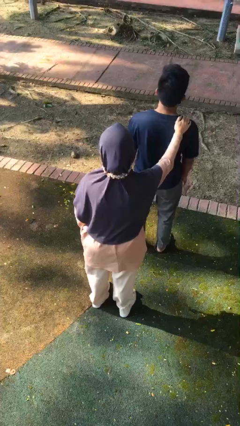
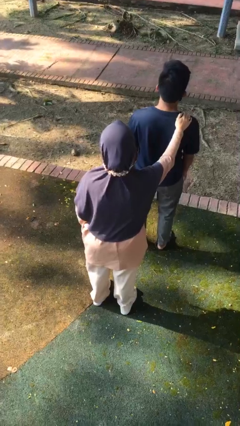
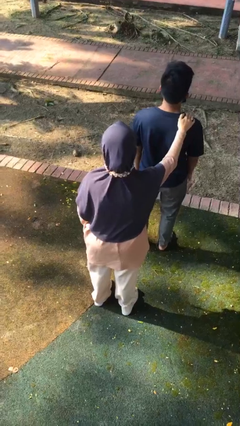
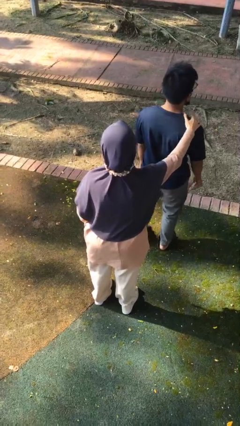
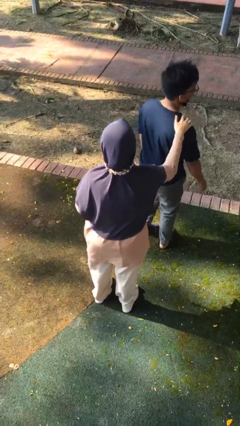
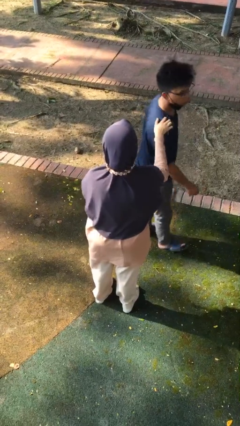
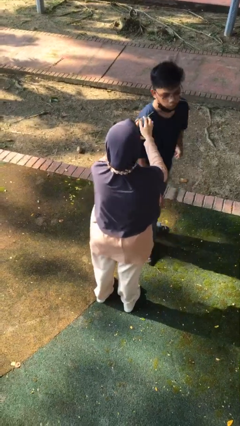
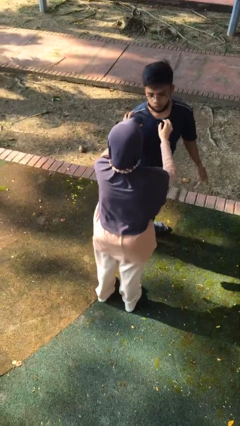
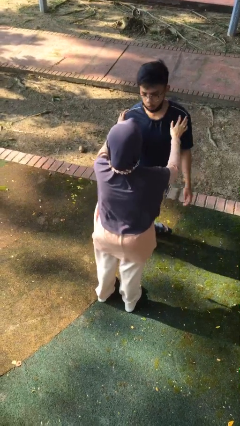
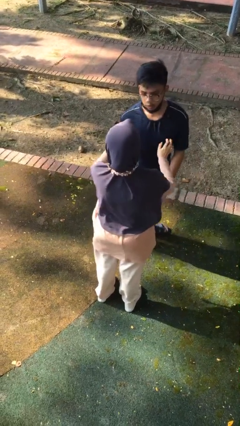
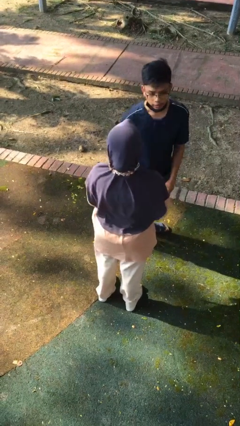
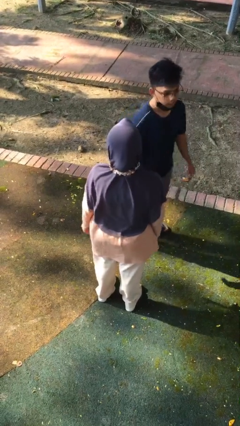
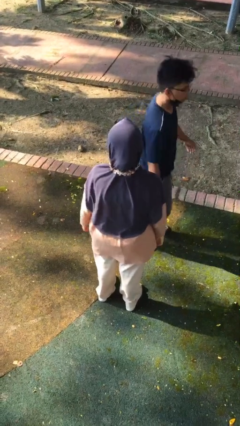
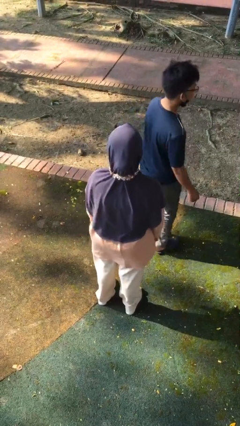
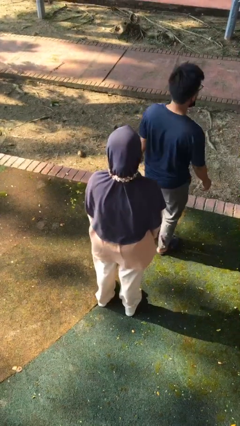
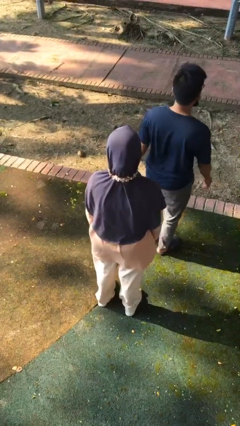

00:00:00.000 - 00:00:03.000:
person spins person around

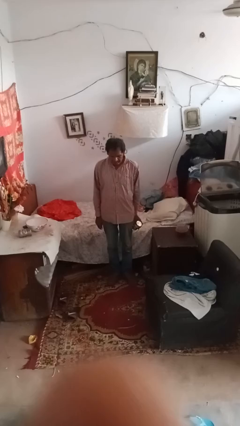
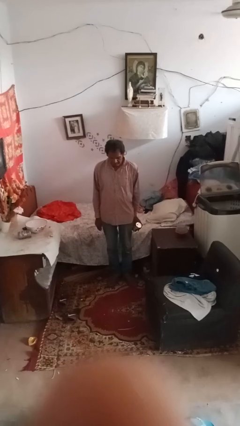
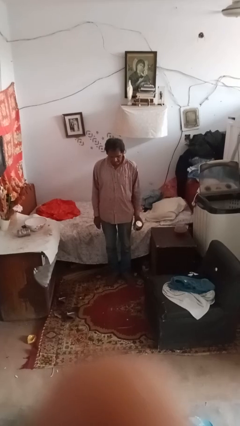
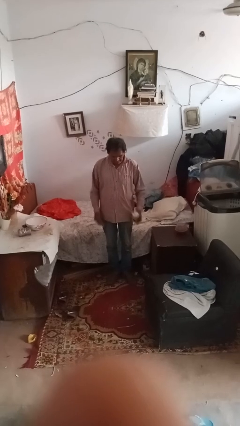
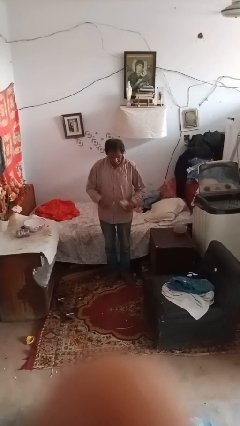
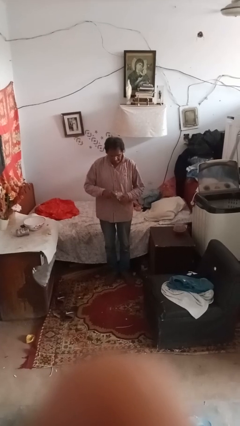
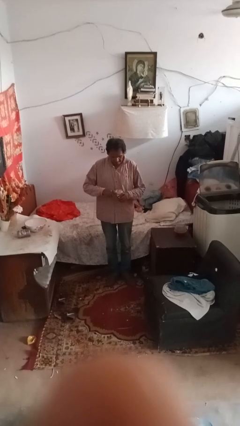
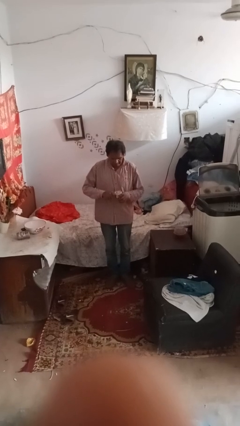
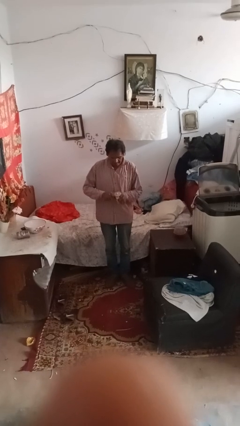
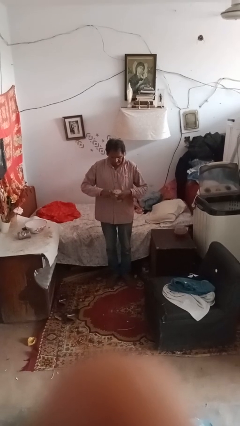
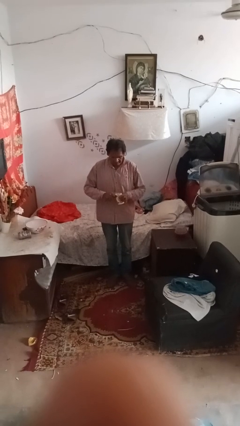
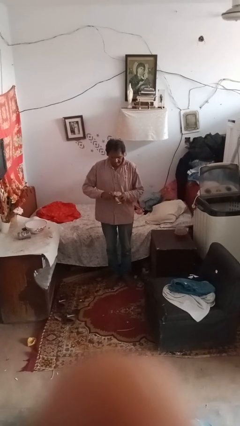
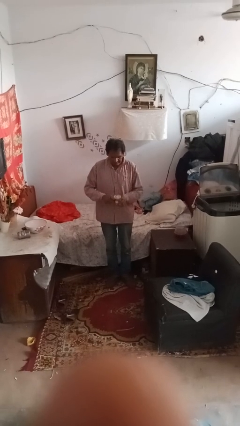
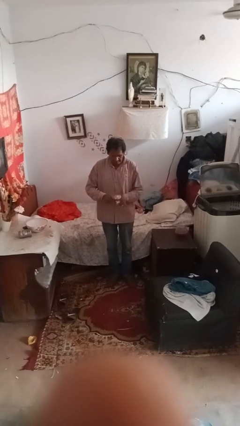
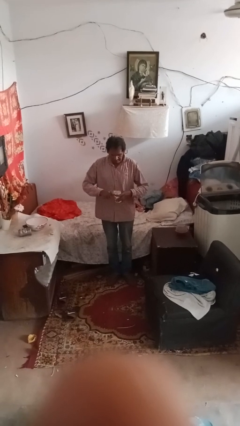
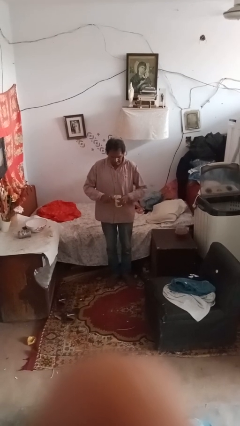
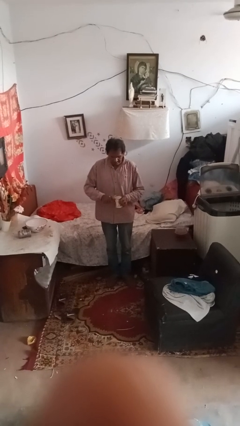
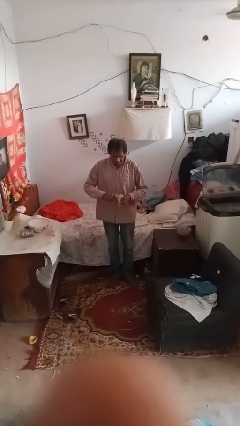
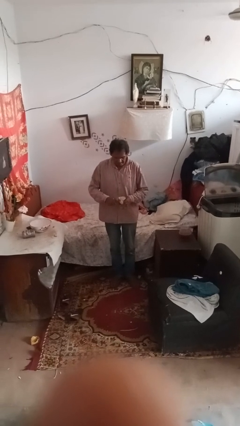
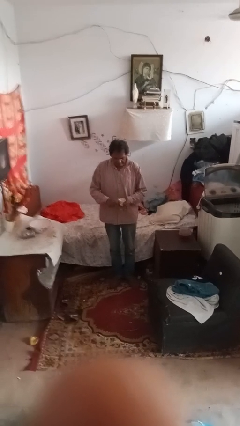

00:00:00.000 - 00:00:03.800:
person opens can with can opener

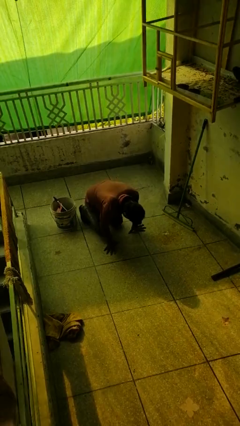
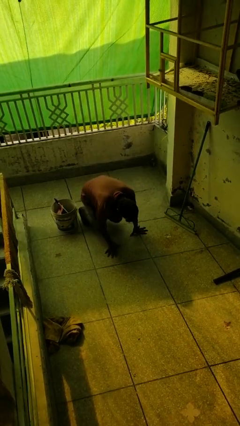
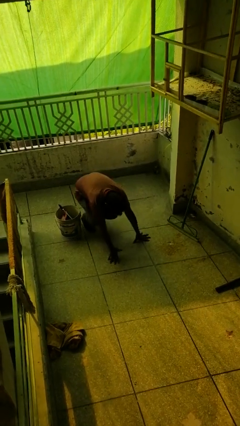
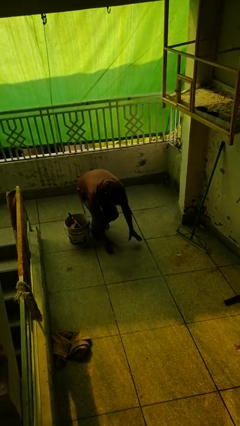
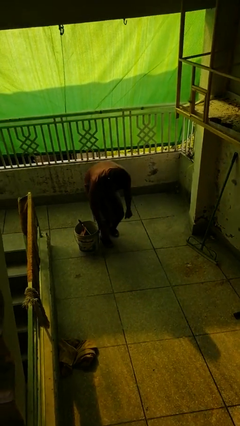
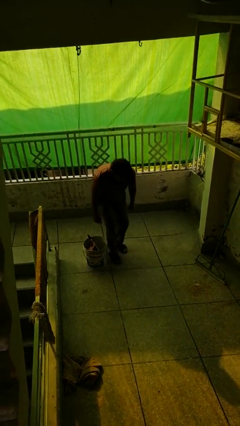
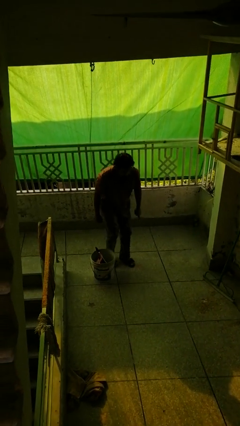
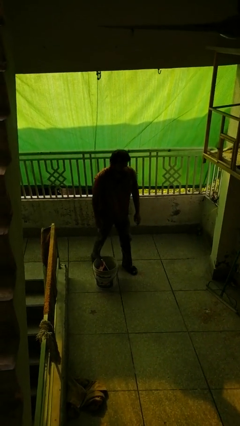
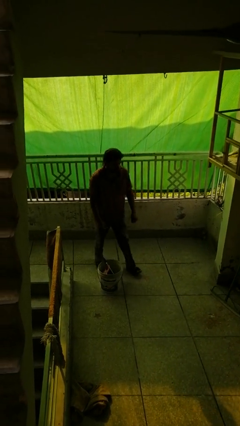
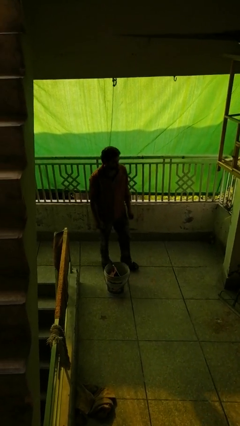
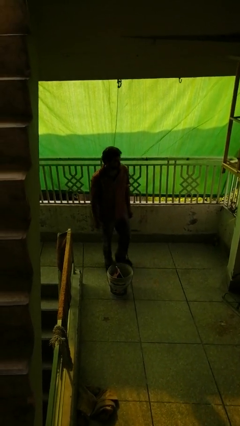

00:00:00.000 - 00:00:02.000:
person stands up from floor

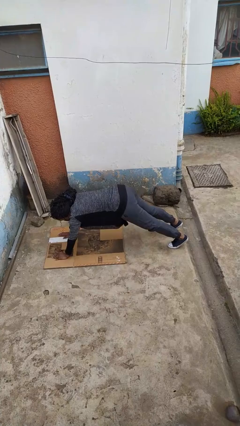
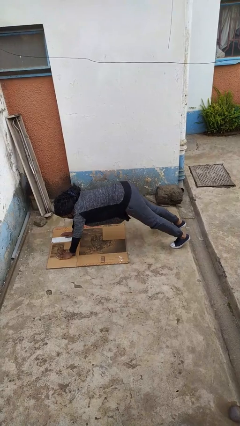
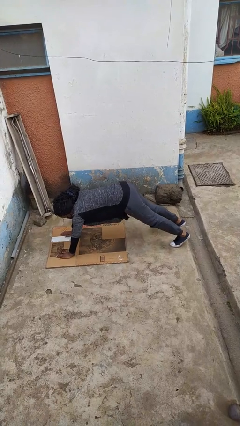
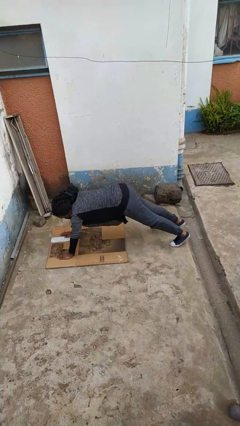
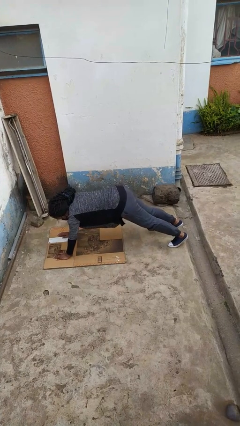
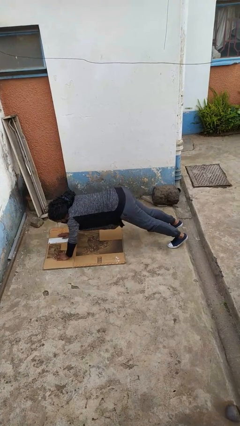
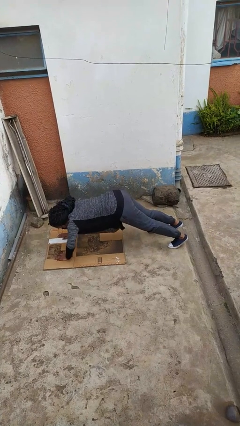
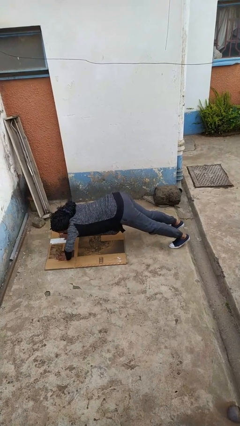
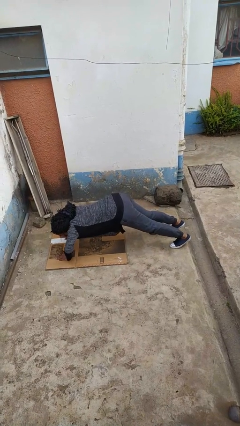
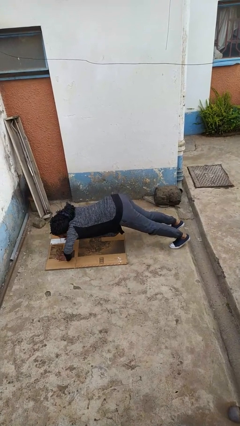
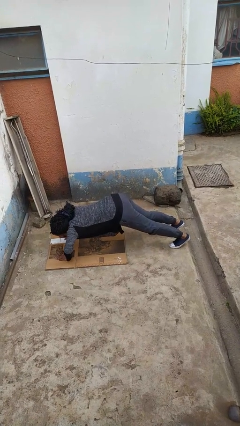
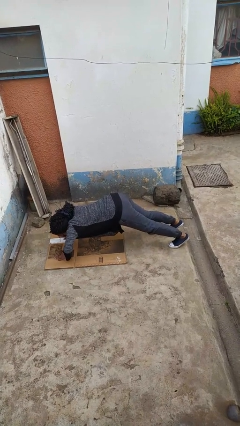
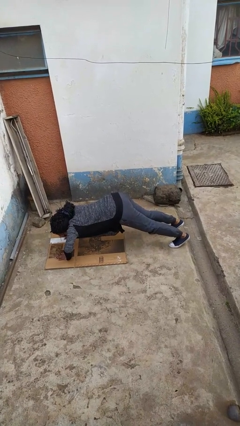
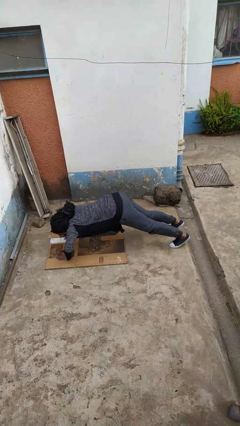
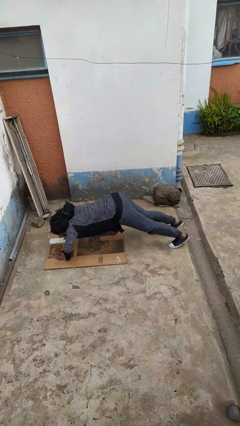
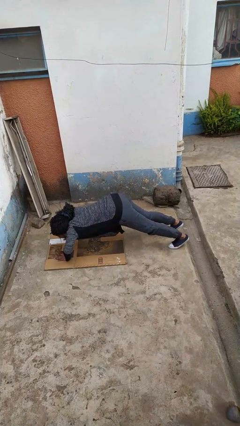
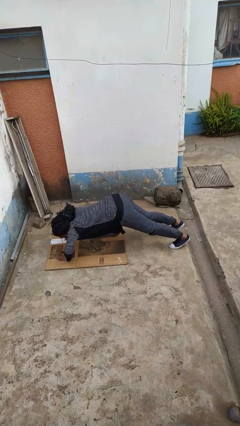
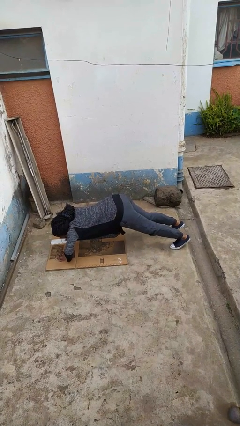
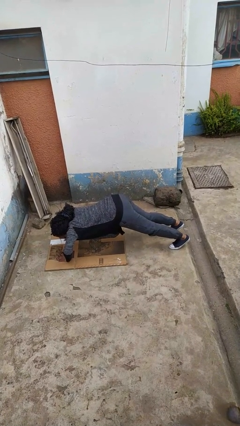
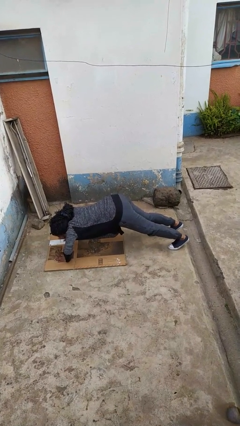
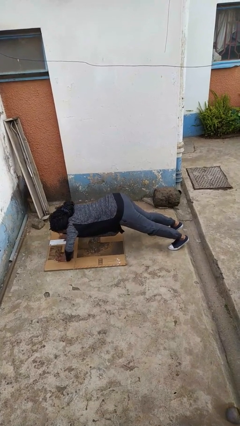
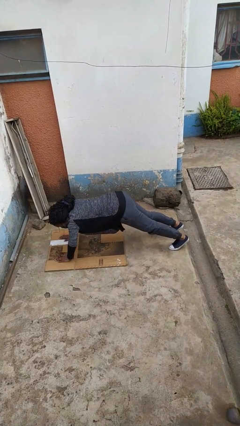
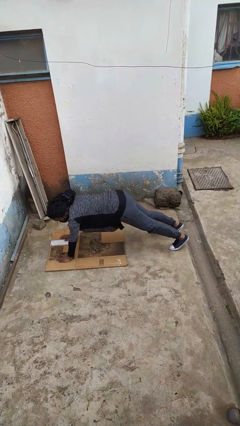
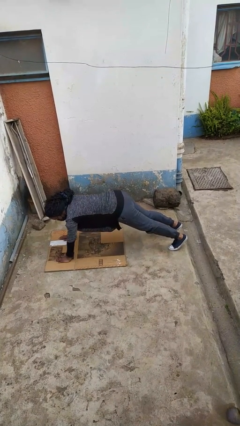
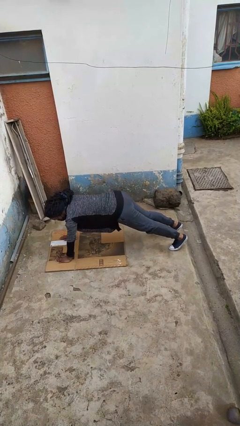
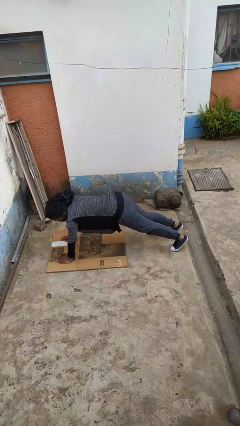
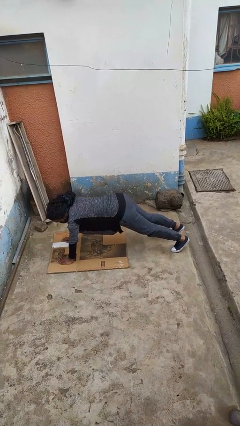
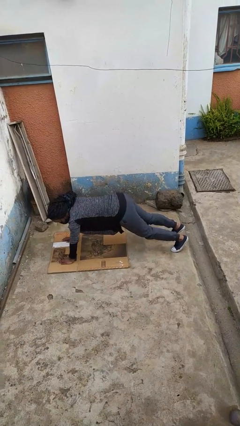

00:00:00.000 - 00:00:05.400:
person exercises with pushup

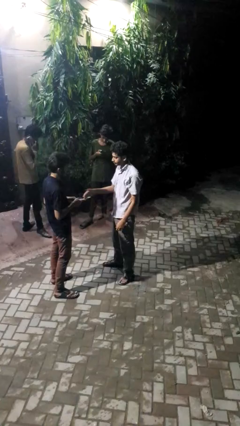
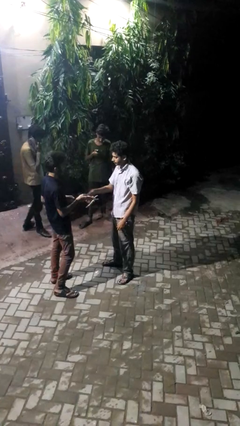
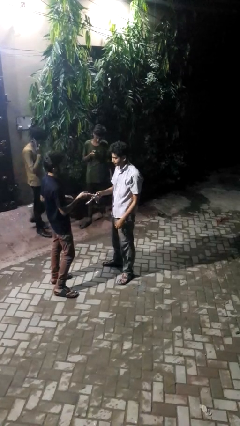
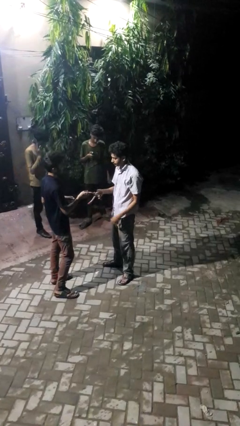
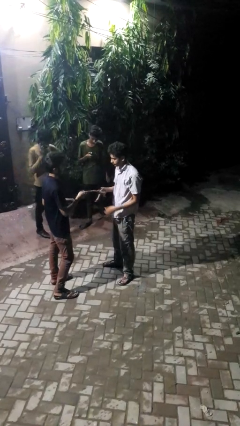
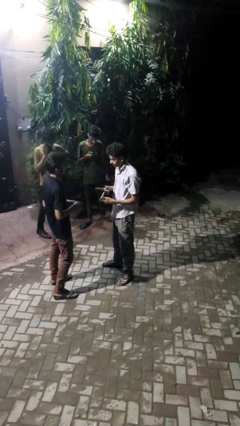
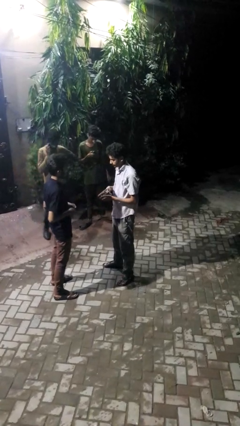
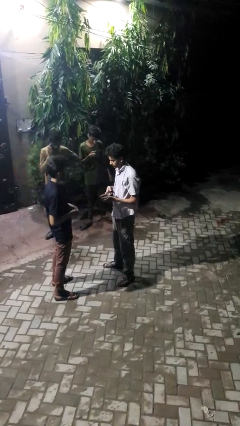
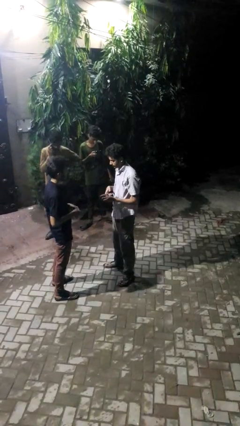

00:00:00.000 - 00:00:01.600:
person transfers object to person

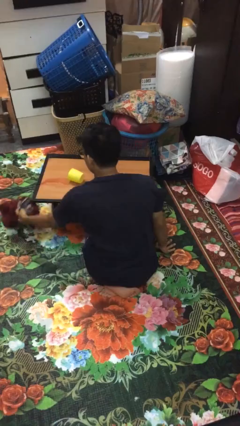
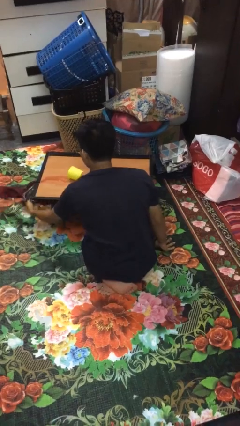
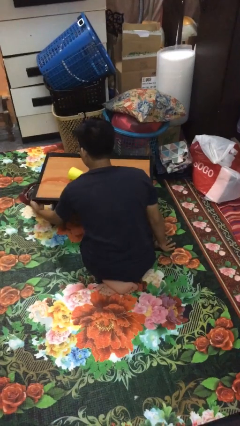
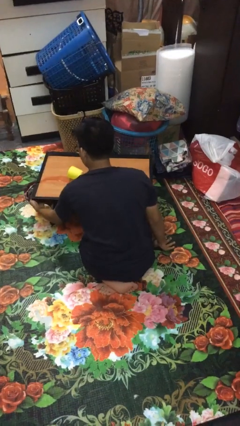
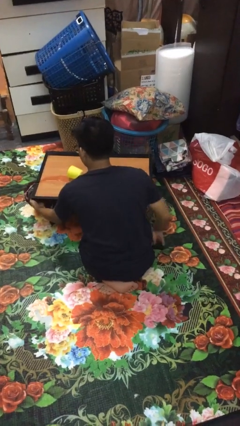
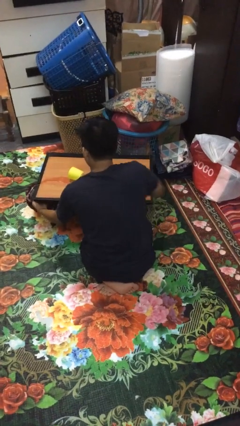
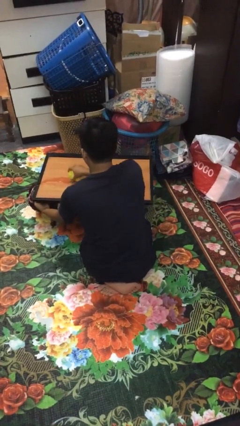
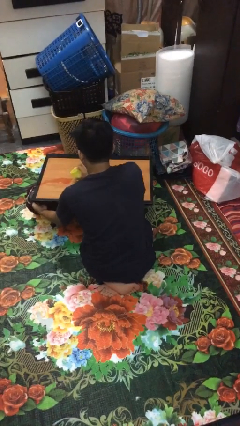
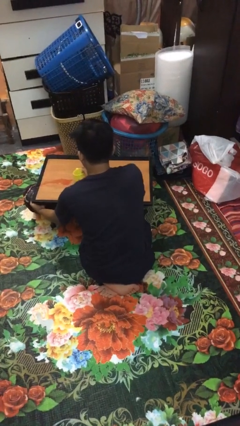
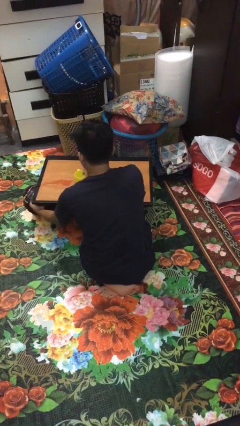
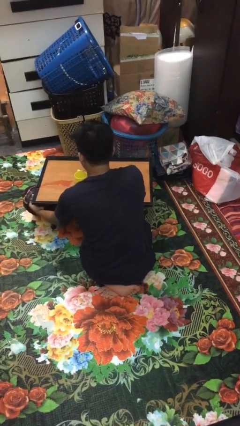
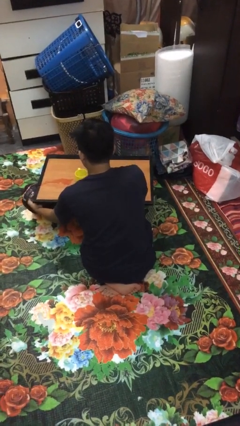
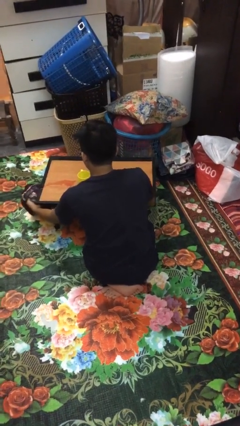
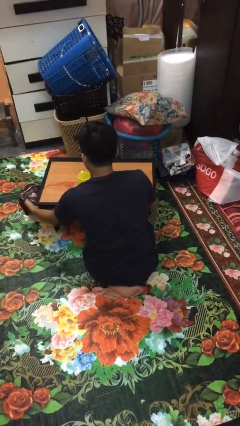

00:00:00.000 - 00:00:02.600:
person sets upright glass
